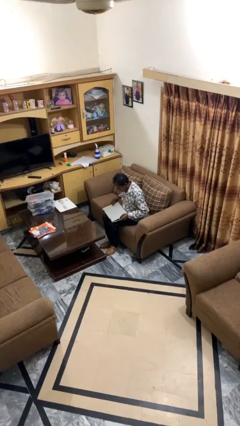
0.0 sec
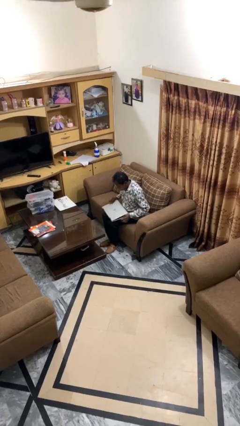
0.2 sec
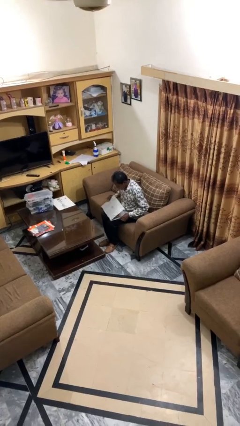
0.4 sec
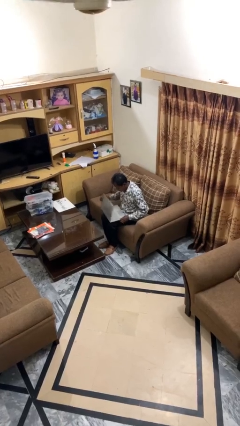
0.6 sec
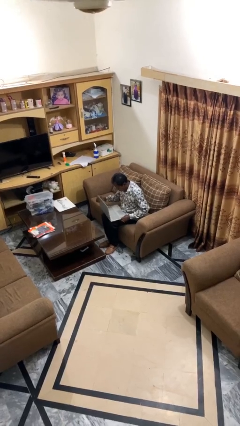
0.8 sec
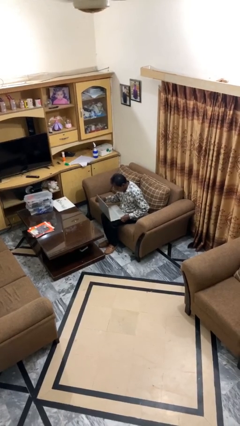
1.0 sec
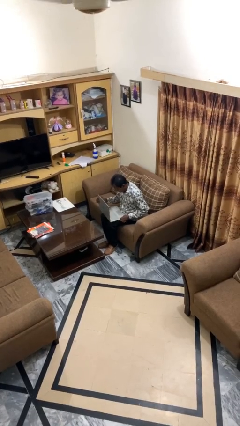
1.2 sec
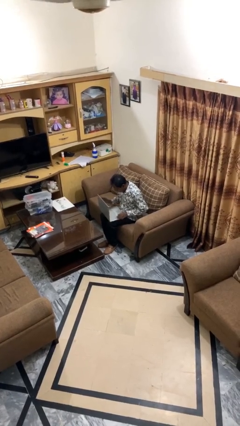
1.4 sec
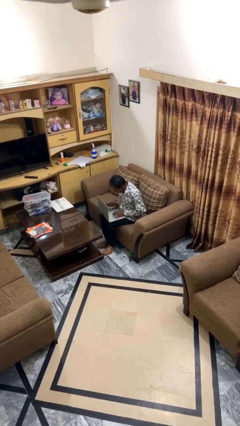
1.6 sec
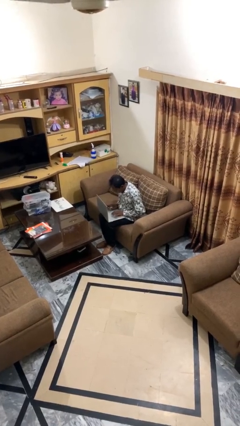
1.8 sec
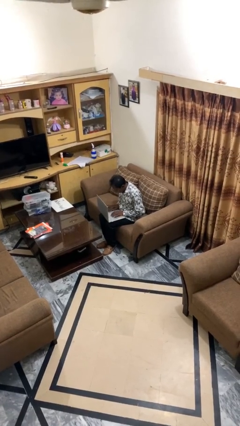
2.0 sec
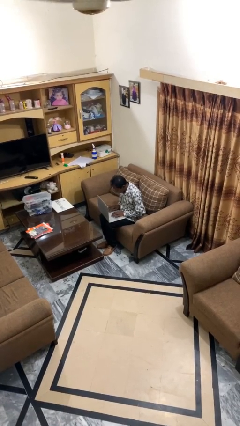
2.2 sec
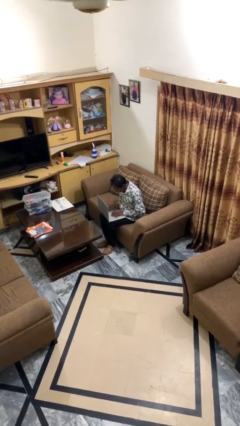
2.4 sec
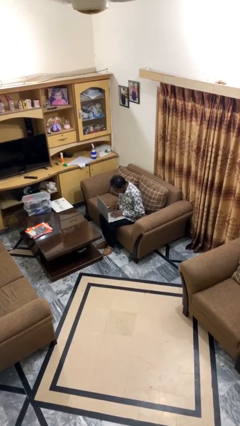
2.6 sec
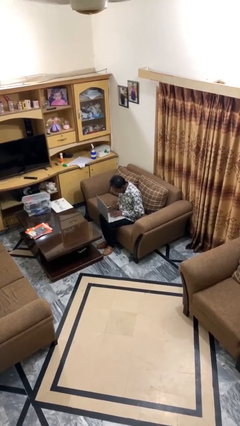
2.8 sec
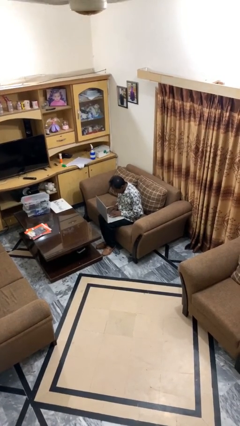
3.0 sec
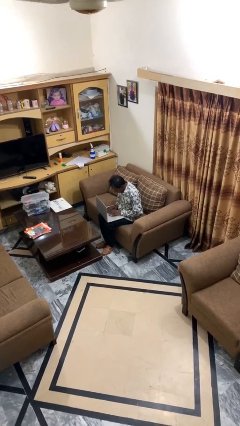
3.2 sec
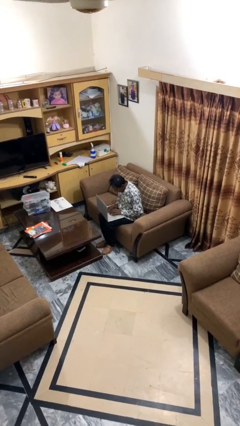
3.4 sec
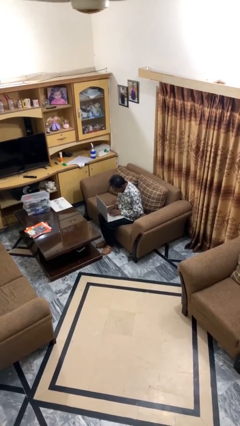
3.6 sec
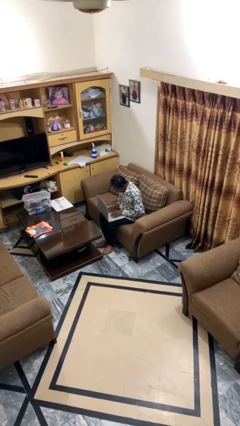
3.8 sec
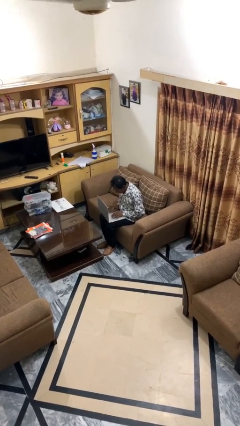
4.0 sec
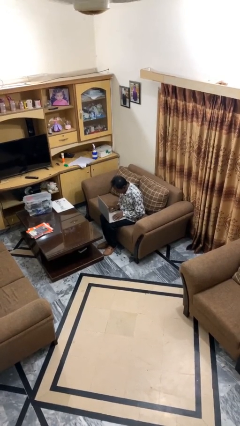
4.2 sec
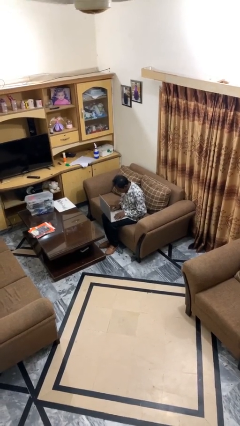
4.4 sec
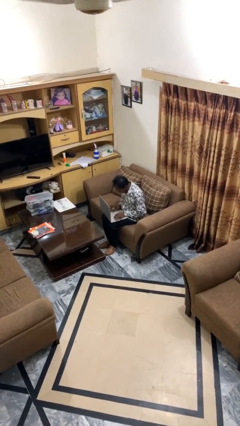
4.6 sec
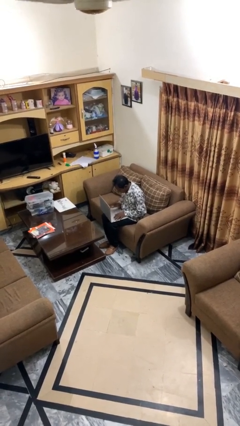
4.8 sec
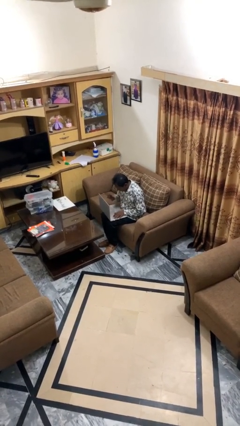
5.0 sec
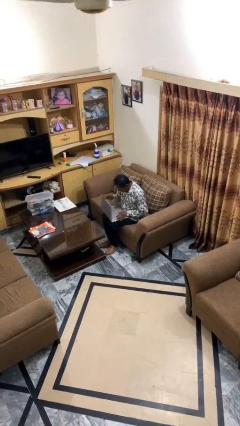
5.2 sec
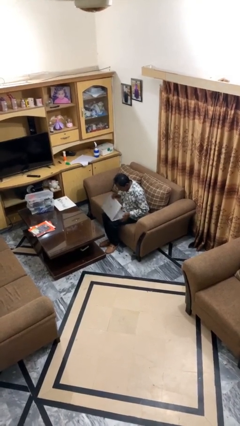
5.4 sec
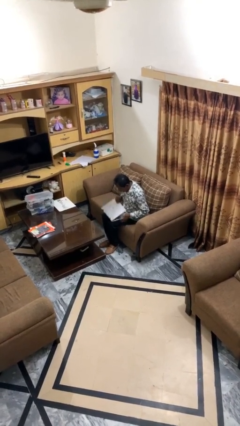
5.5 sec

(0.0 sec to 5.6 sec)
person interacts with laptop

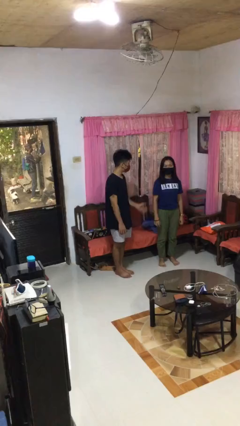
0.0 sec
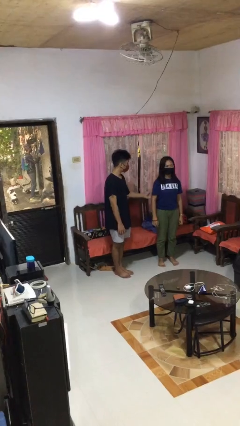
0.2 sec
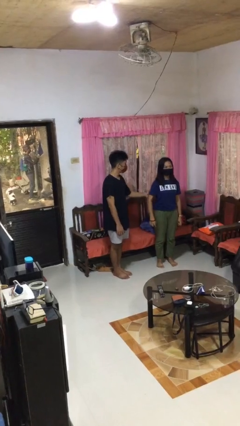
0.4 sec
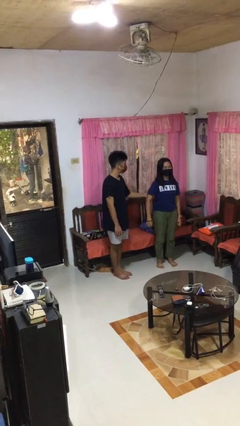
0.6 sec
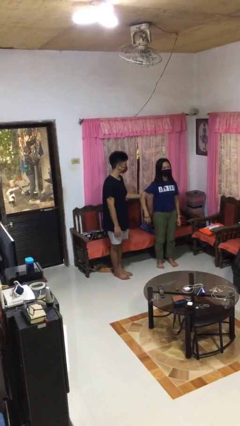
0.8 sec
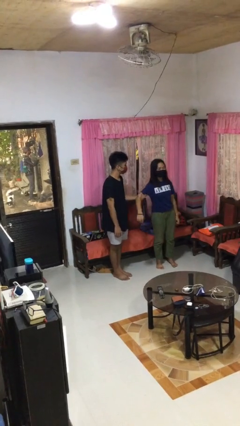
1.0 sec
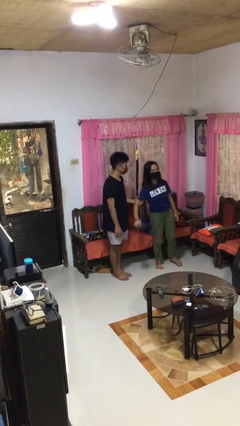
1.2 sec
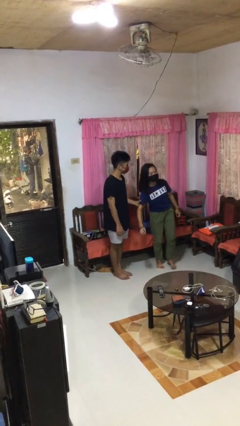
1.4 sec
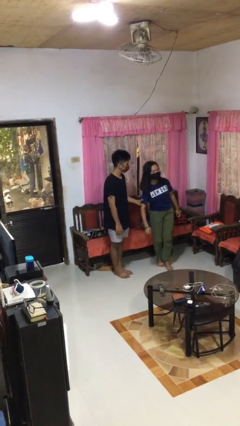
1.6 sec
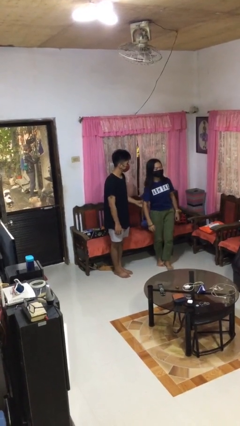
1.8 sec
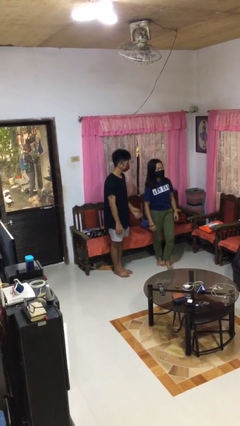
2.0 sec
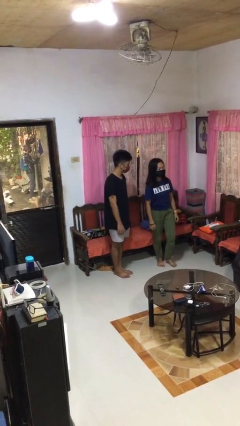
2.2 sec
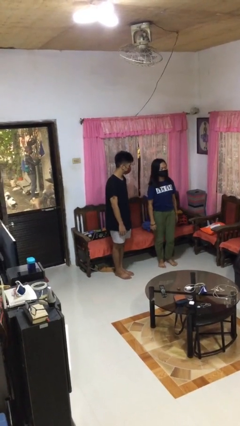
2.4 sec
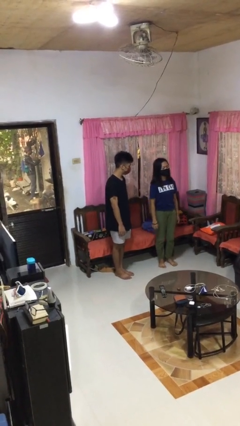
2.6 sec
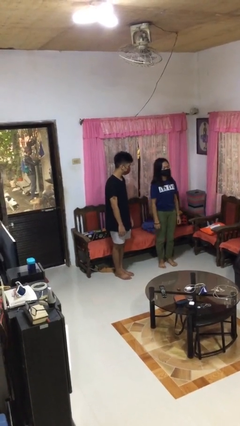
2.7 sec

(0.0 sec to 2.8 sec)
person grabs person by bicep

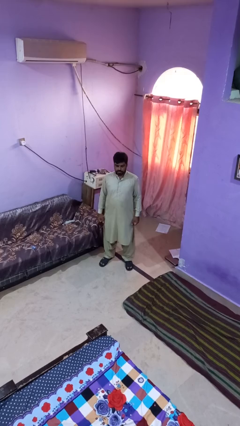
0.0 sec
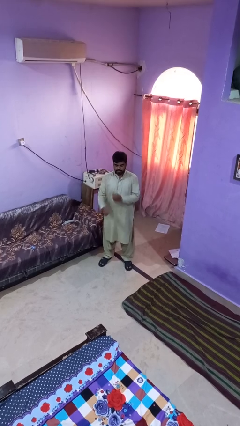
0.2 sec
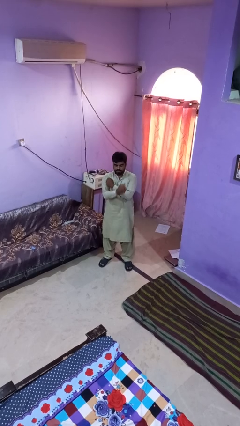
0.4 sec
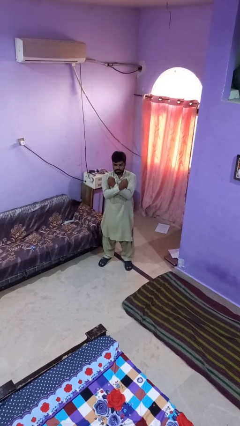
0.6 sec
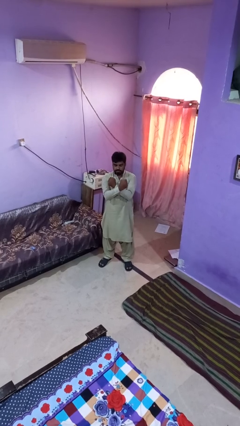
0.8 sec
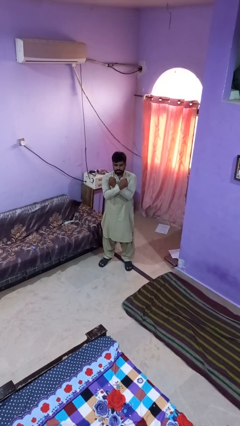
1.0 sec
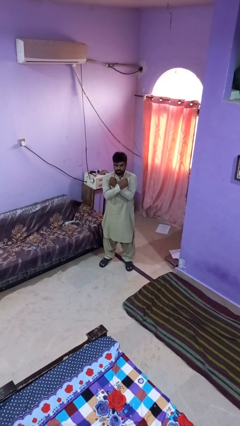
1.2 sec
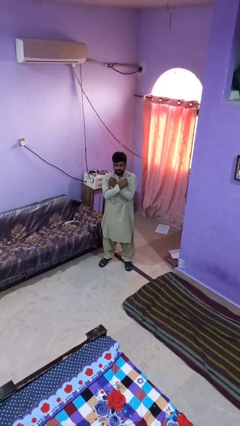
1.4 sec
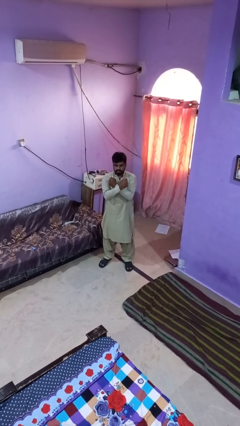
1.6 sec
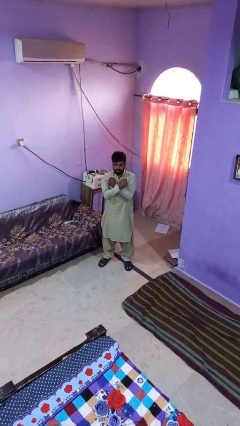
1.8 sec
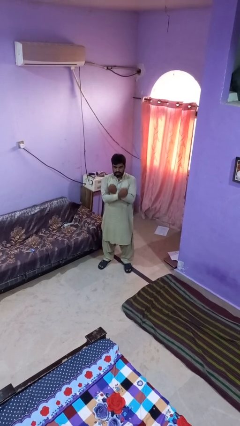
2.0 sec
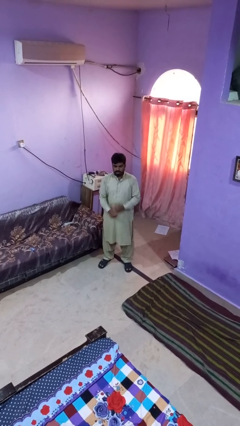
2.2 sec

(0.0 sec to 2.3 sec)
person gestures arms x

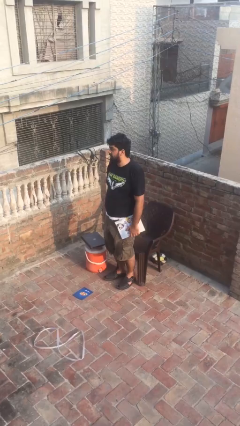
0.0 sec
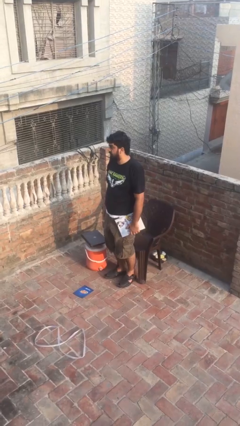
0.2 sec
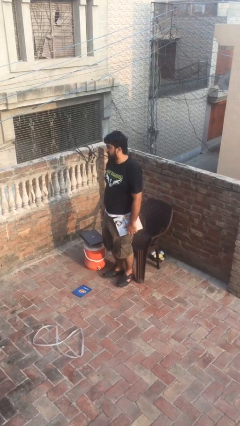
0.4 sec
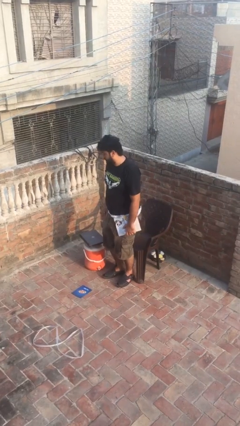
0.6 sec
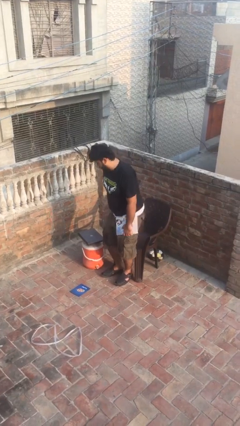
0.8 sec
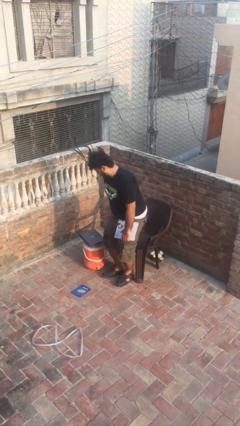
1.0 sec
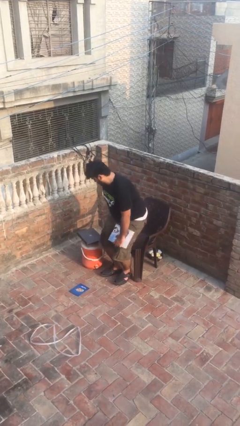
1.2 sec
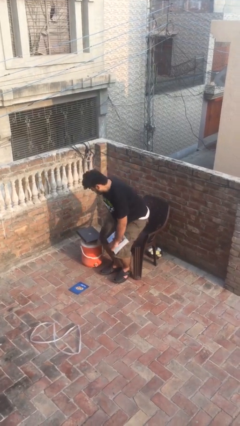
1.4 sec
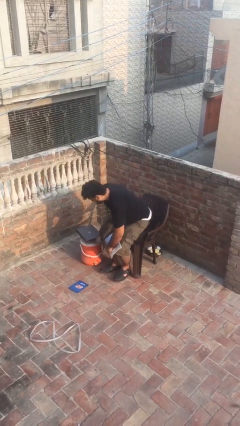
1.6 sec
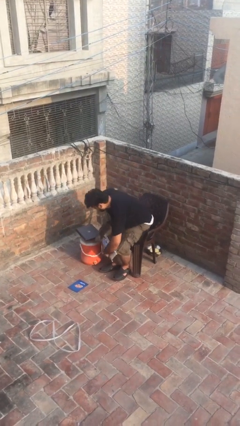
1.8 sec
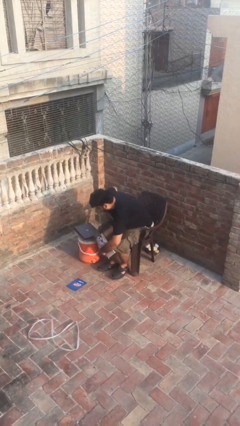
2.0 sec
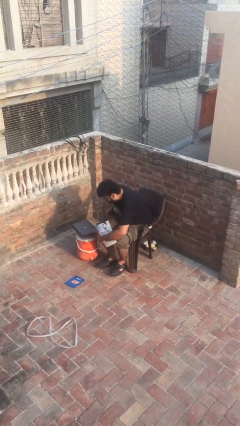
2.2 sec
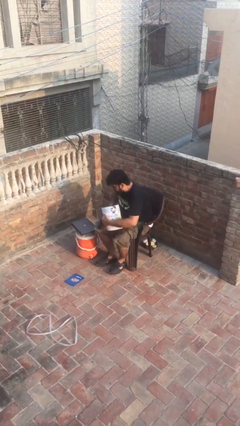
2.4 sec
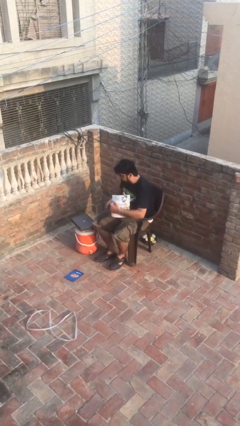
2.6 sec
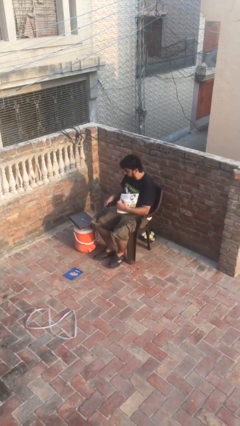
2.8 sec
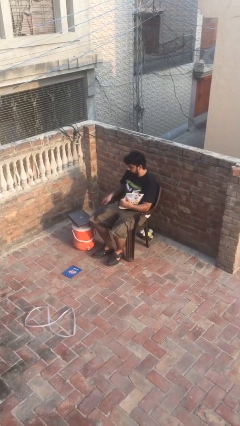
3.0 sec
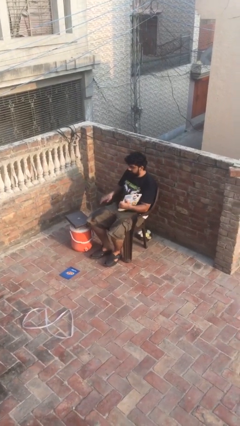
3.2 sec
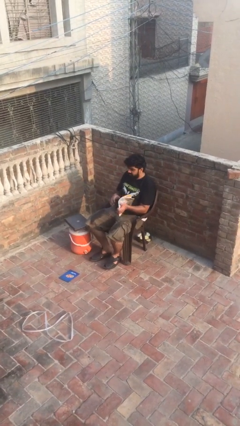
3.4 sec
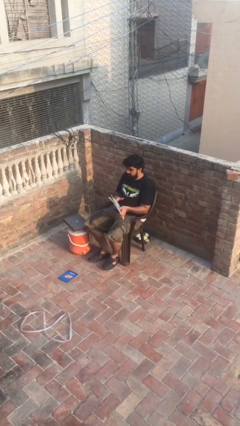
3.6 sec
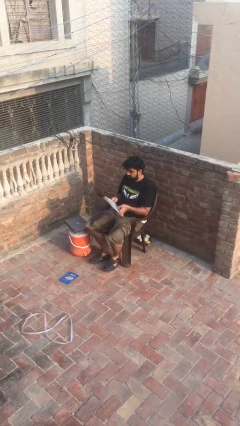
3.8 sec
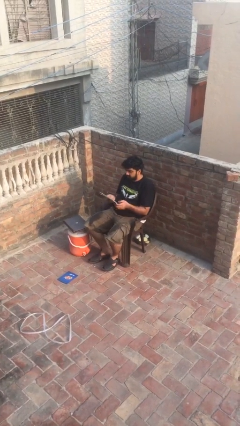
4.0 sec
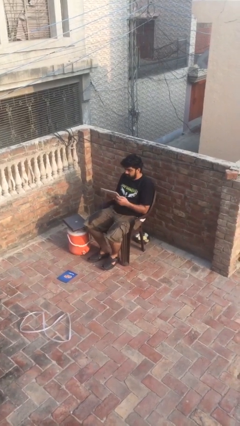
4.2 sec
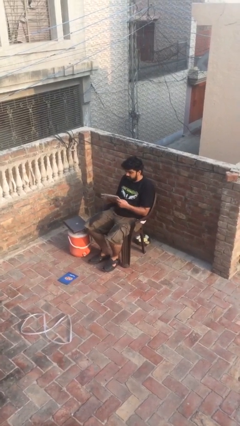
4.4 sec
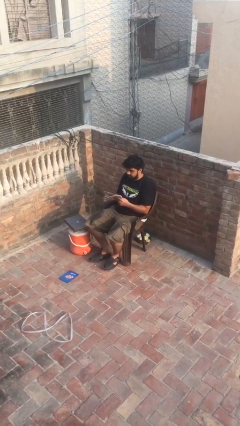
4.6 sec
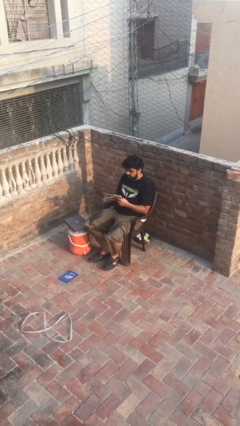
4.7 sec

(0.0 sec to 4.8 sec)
person sits down

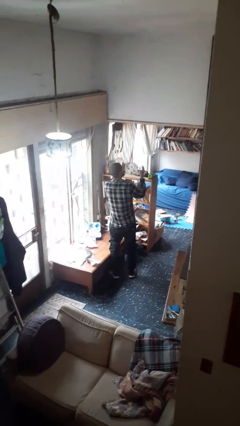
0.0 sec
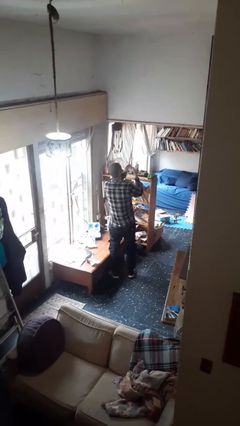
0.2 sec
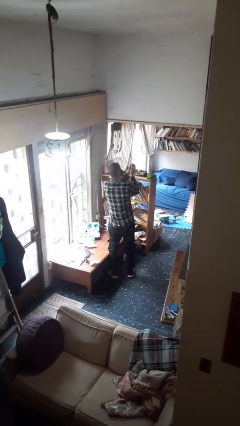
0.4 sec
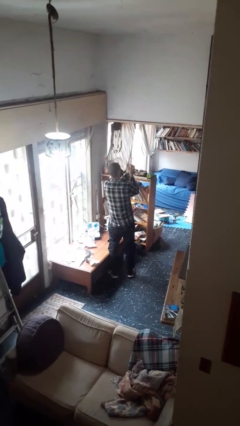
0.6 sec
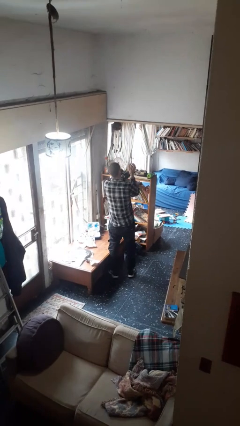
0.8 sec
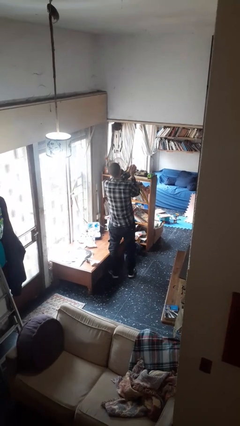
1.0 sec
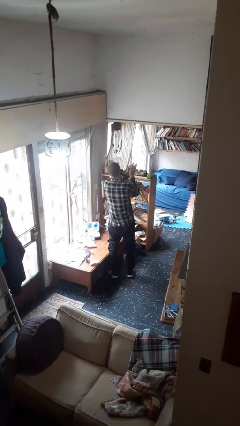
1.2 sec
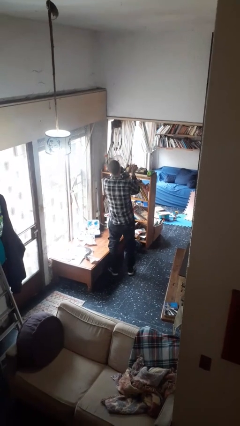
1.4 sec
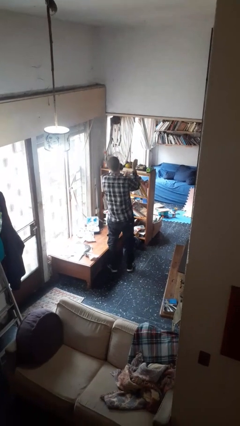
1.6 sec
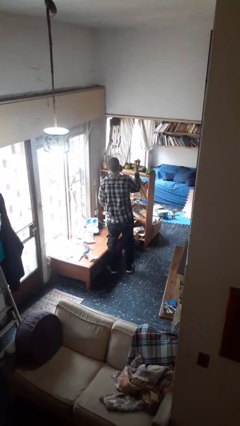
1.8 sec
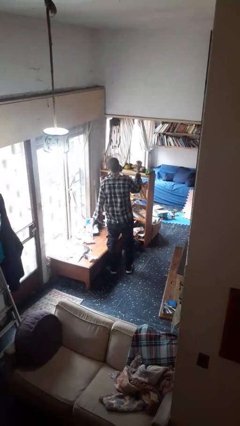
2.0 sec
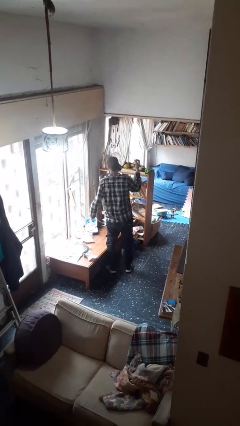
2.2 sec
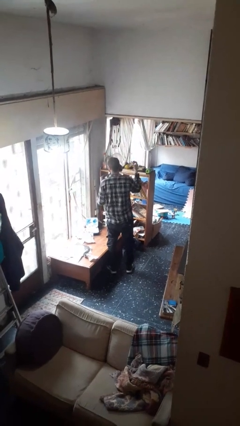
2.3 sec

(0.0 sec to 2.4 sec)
person crumples paper
